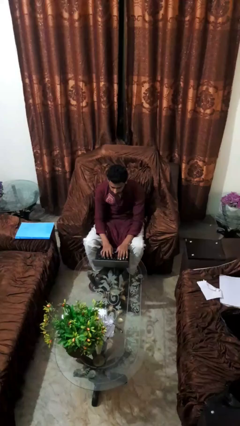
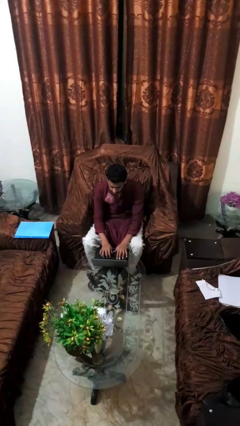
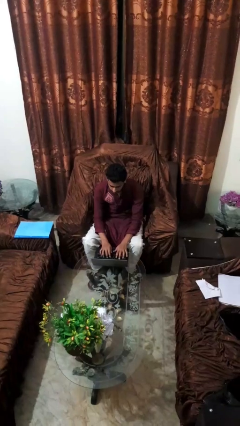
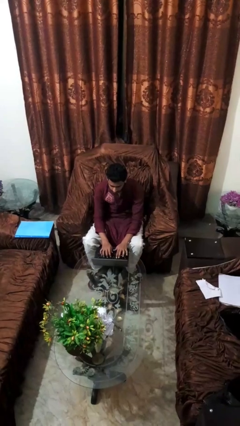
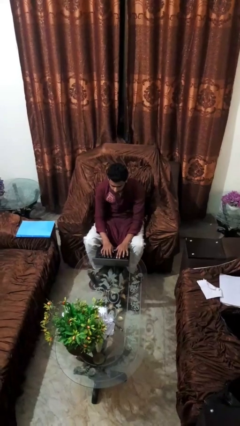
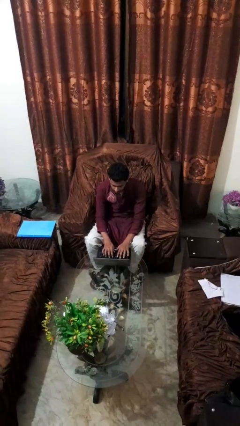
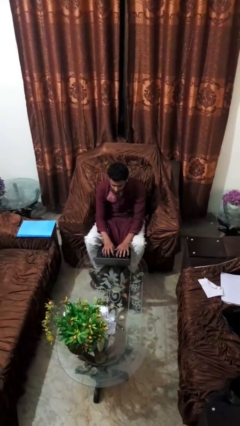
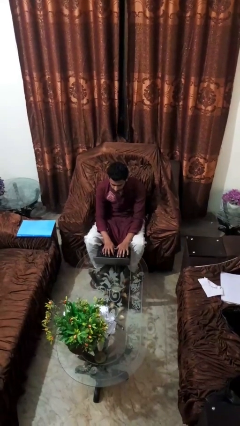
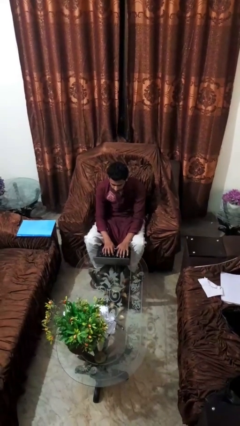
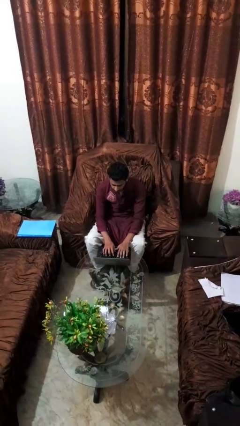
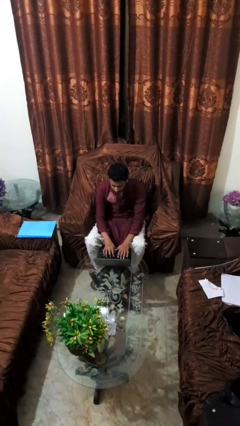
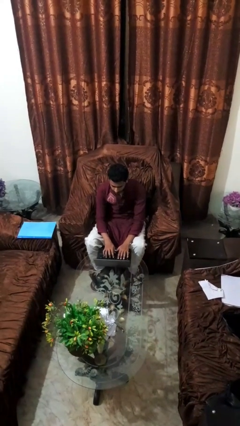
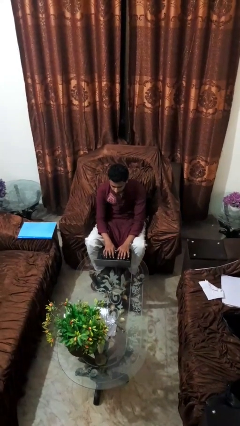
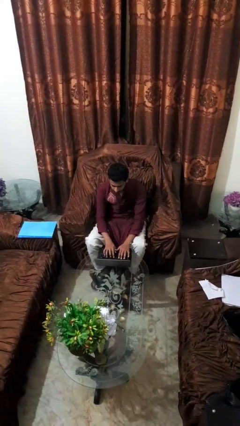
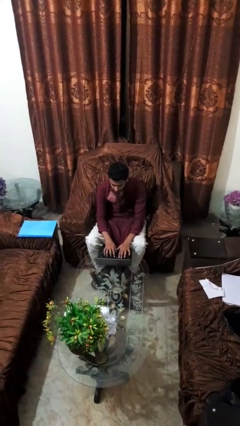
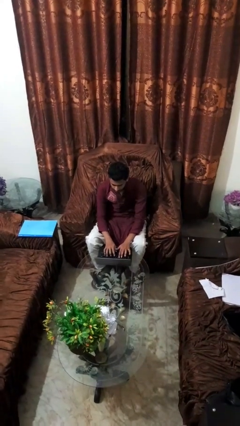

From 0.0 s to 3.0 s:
person interacts with laptop

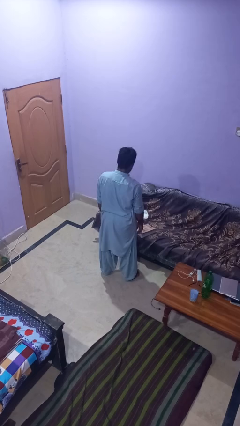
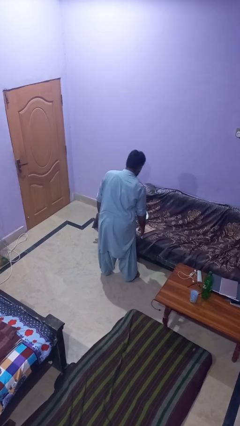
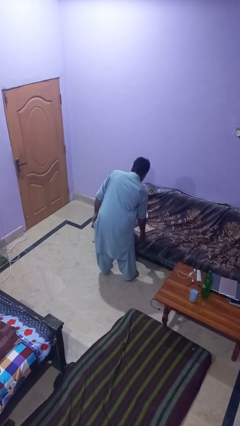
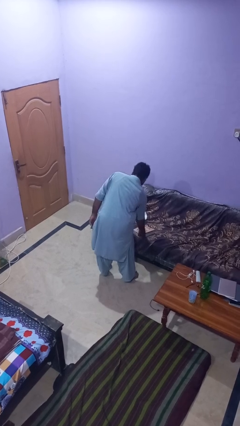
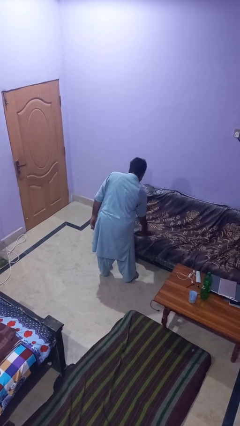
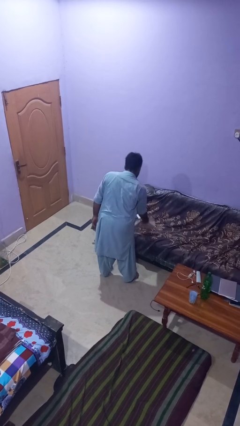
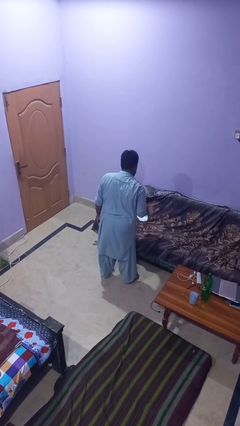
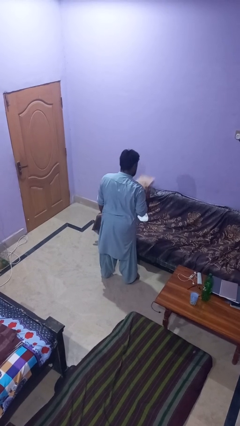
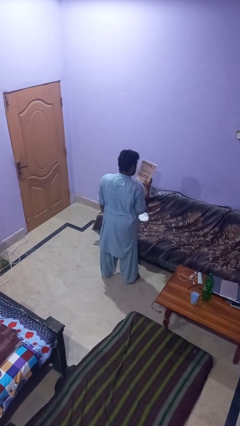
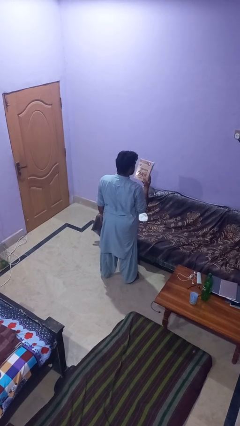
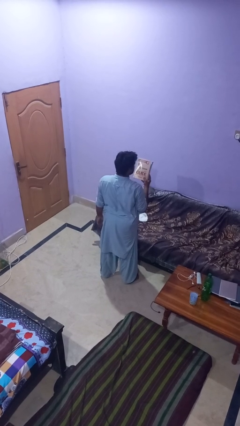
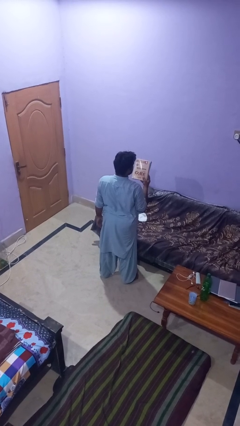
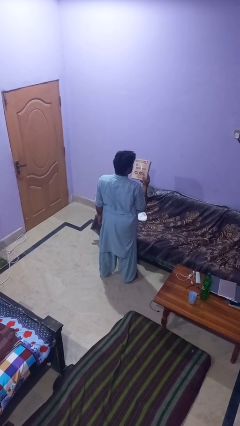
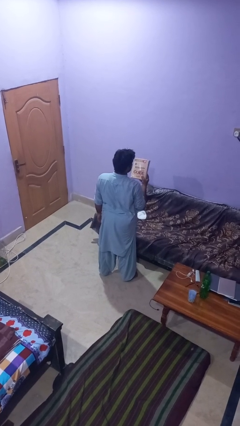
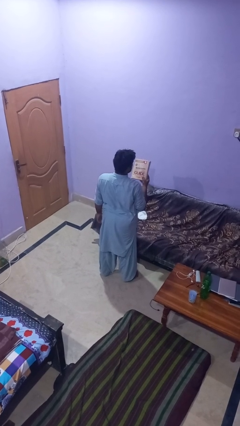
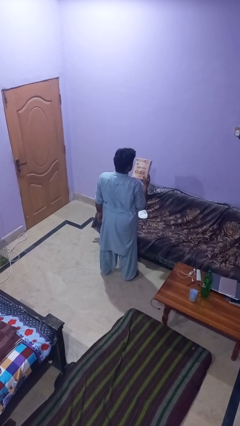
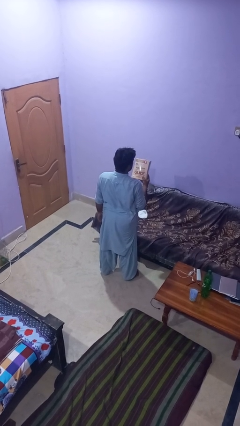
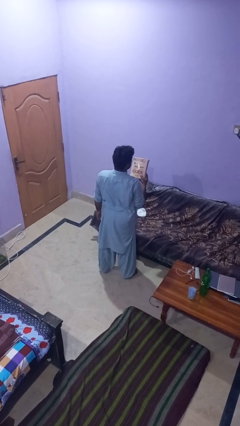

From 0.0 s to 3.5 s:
person picks up object from couch

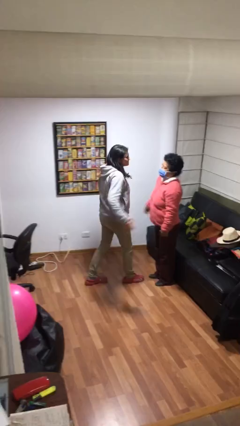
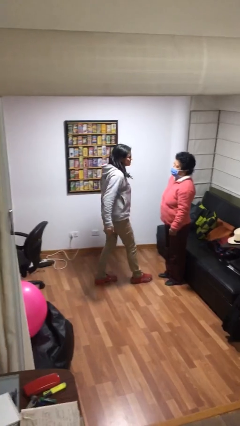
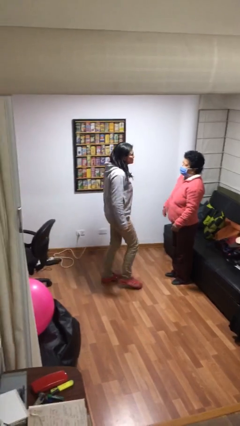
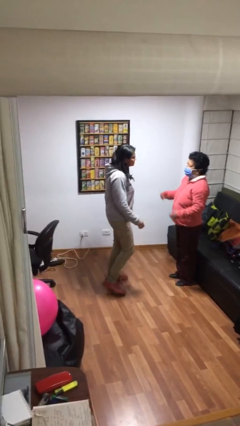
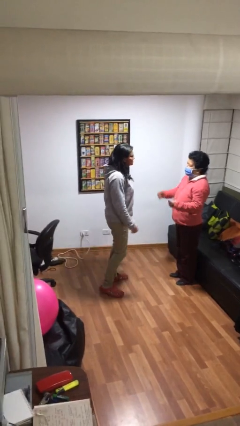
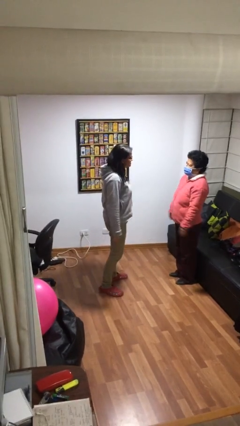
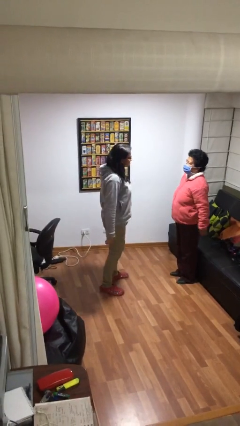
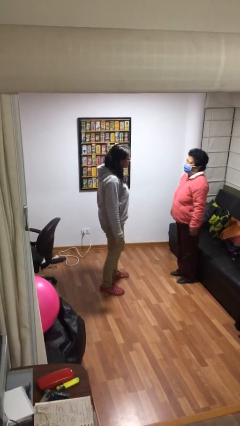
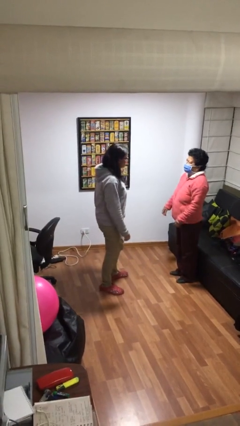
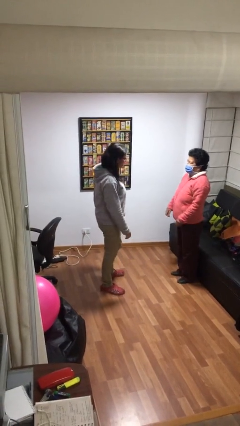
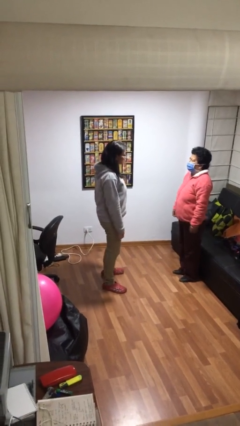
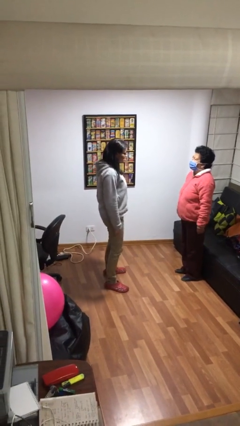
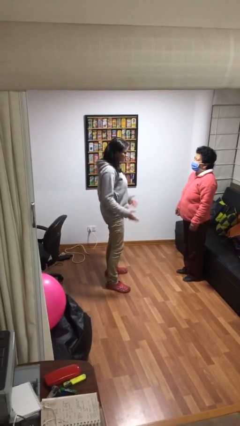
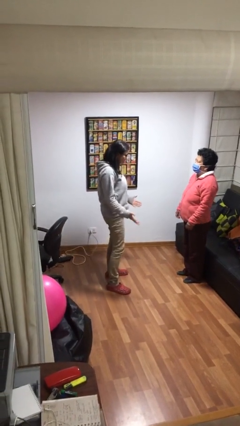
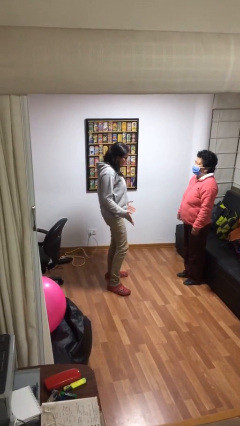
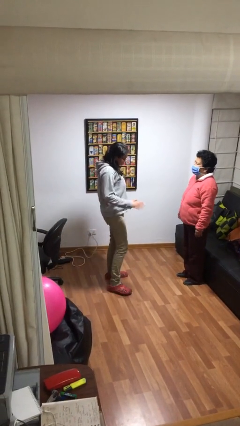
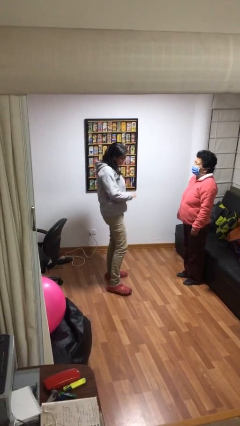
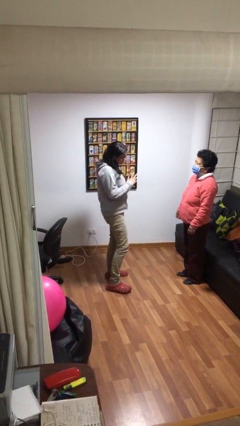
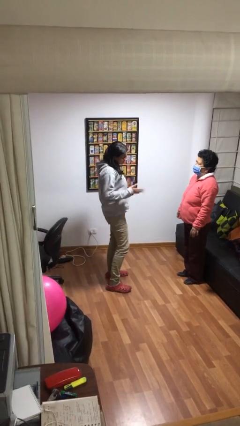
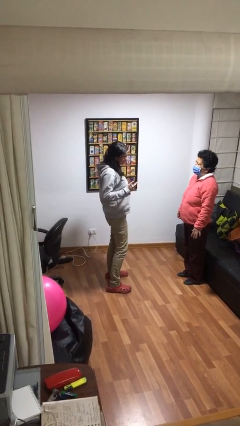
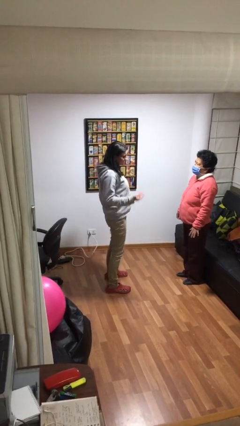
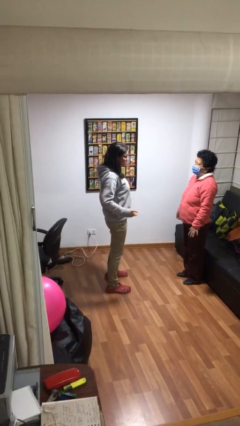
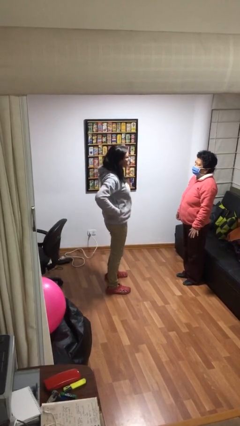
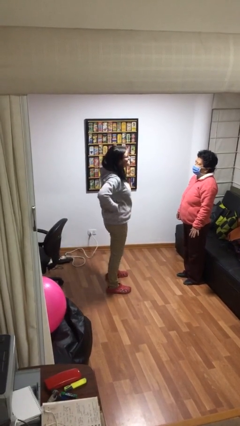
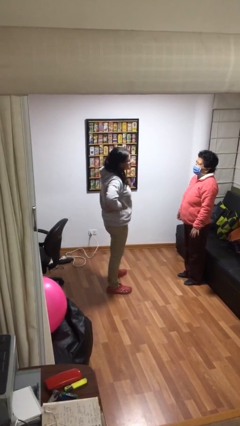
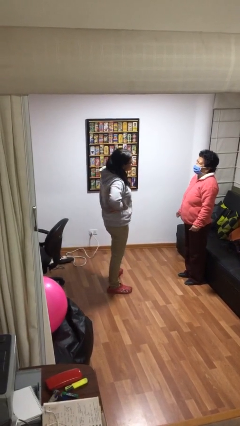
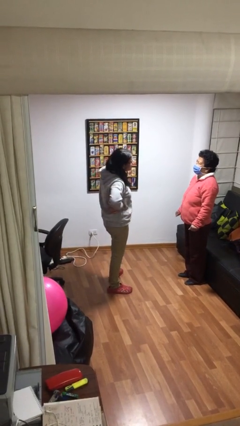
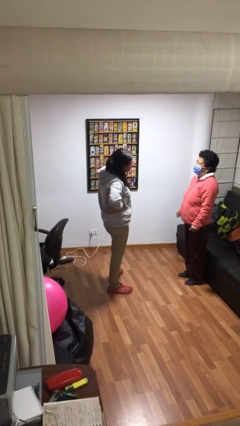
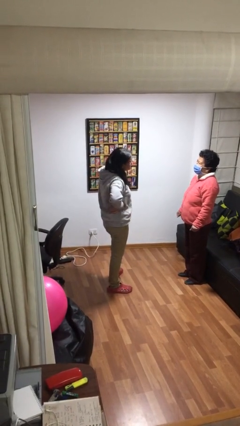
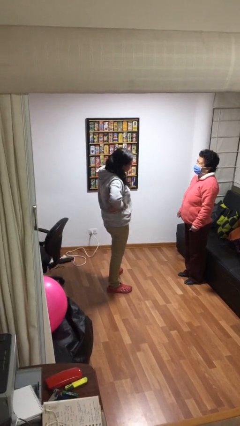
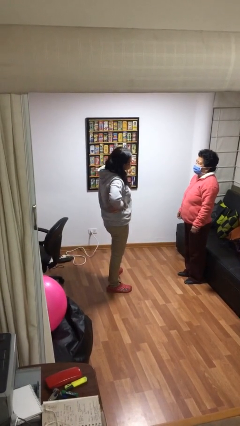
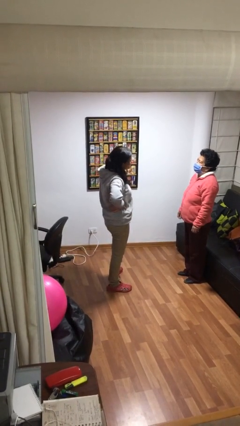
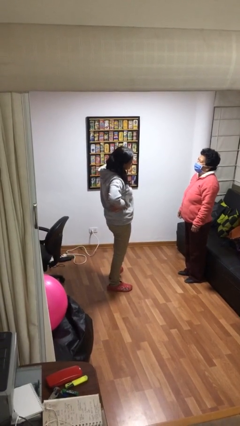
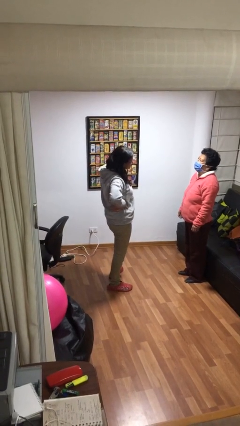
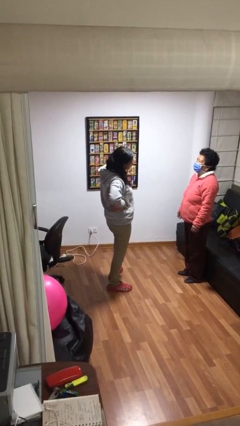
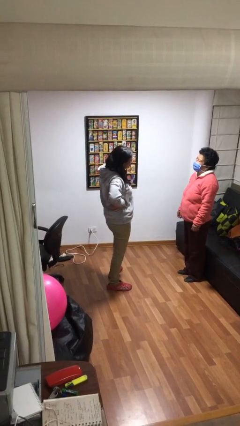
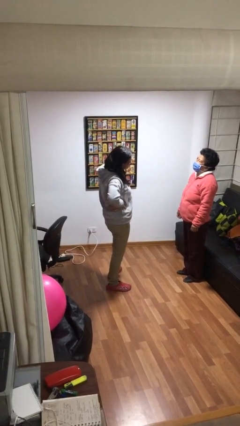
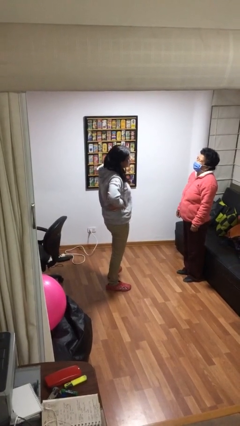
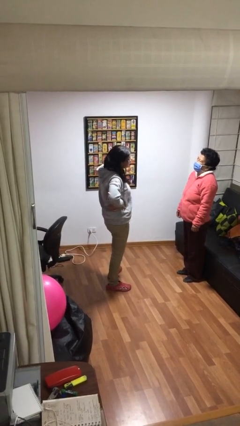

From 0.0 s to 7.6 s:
person talks to person

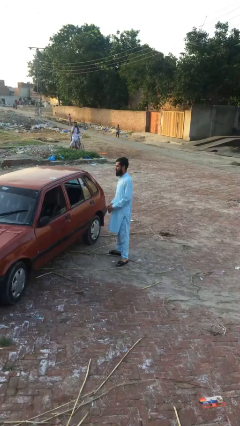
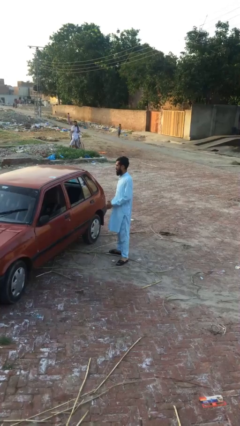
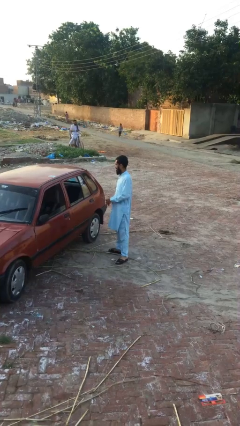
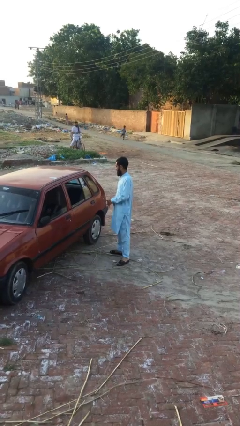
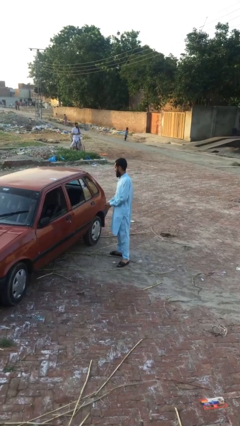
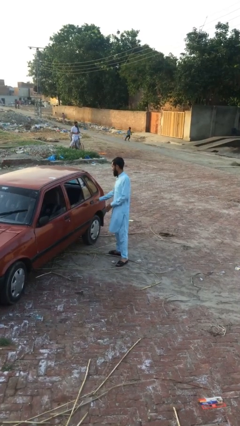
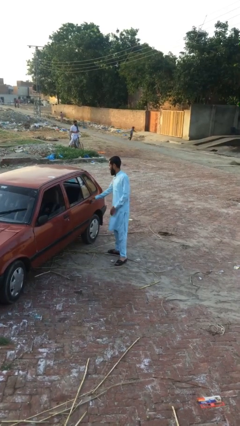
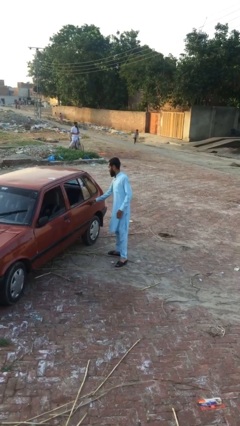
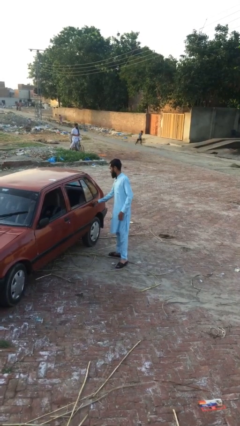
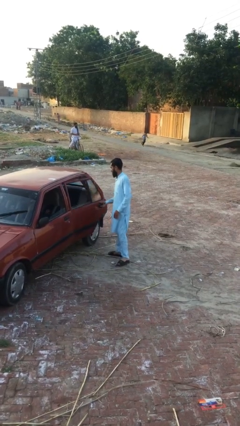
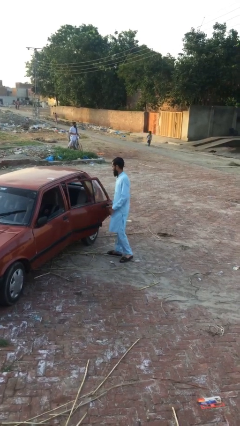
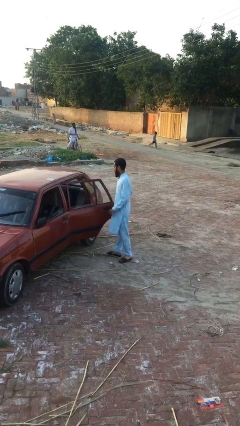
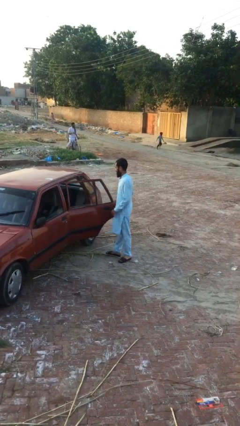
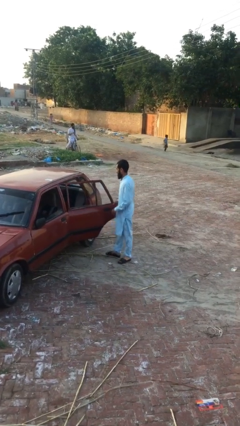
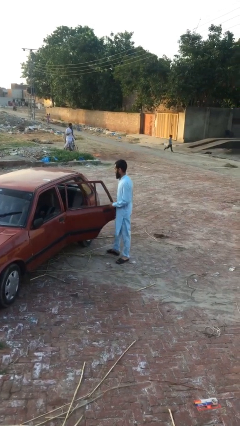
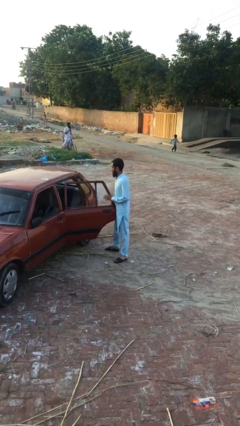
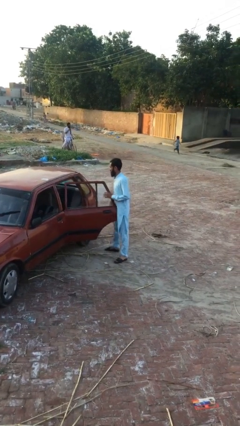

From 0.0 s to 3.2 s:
person opens car door

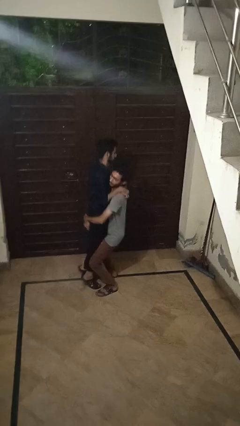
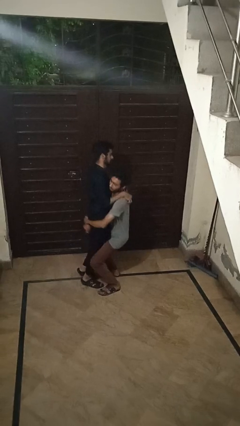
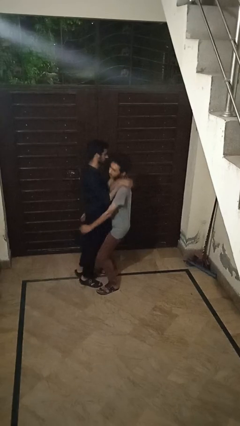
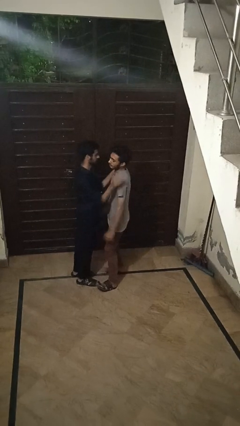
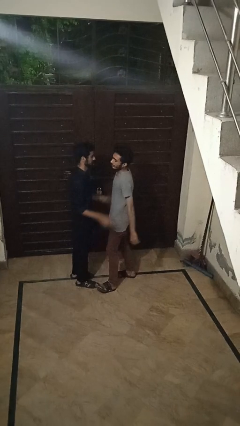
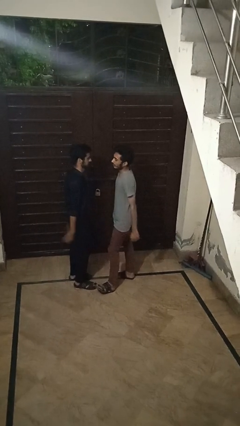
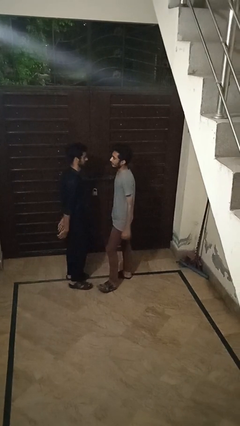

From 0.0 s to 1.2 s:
person puts down person
